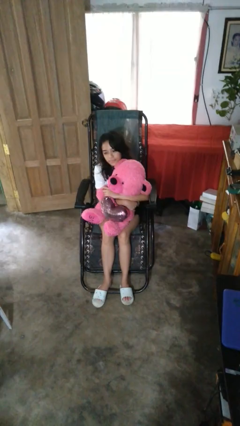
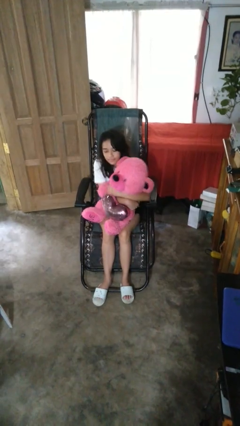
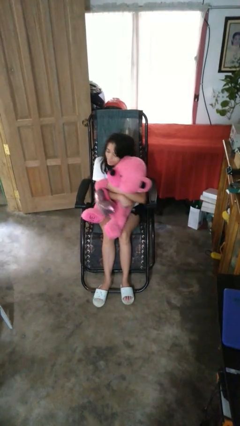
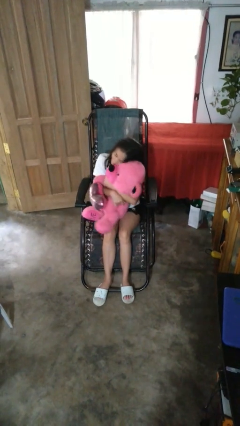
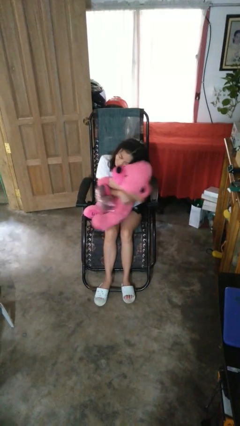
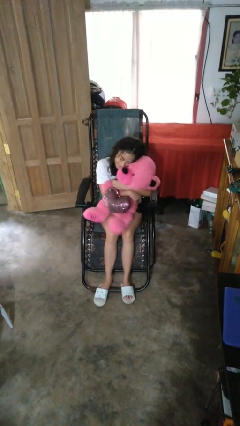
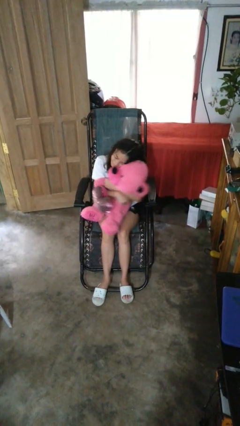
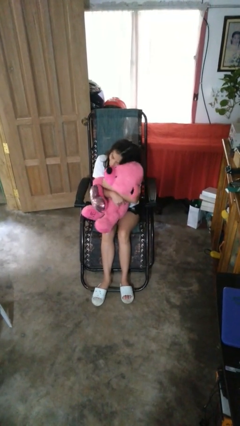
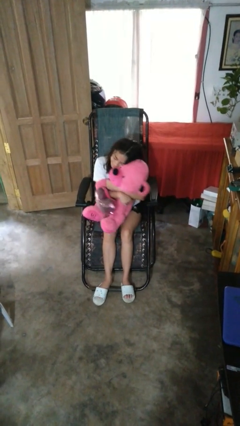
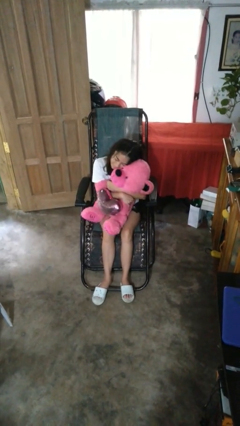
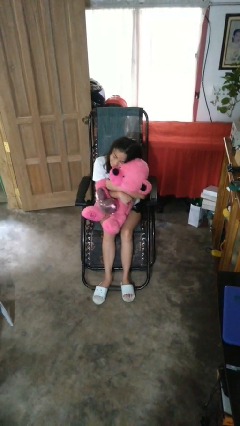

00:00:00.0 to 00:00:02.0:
person hugs stuffed animal

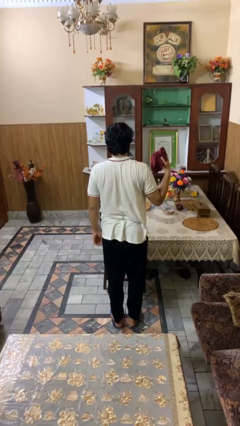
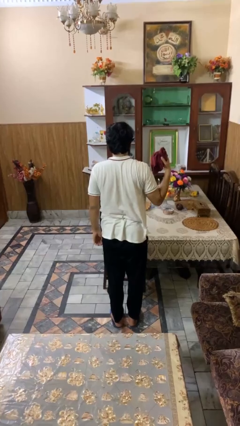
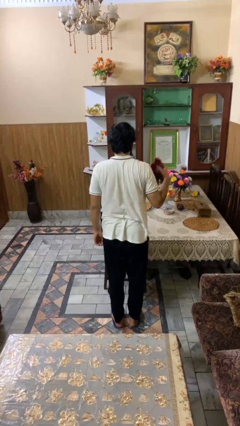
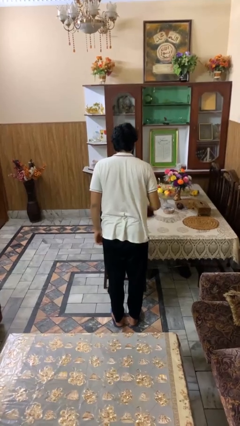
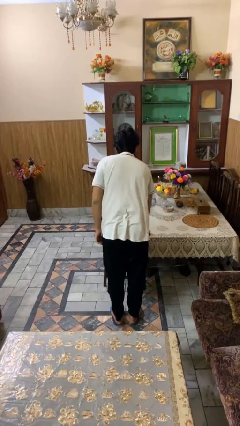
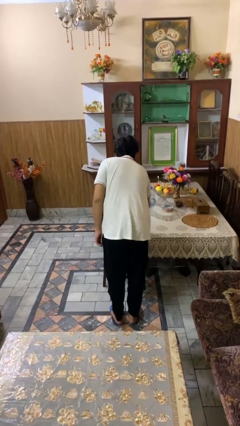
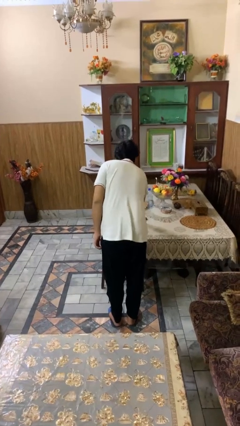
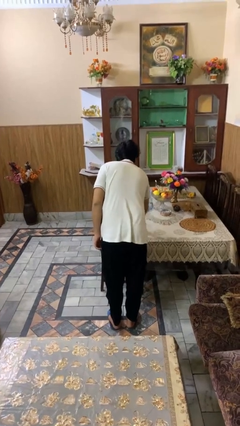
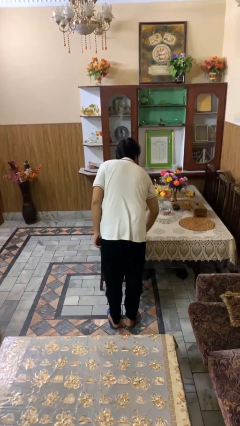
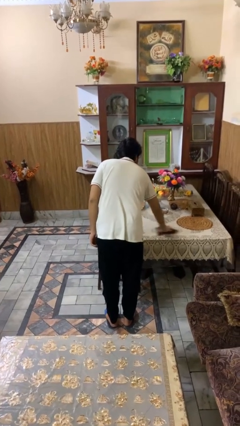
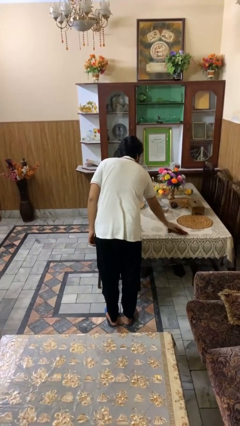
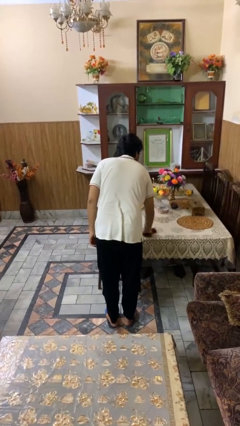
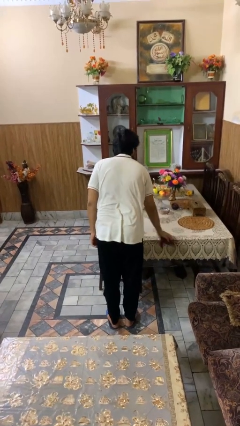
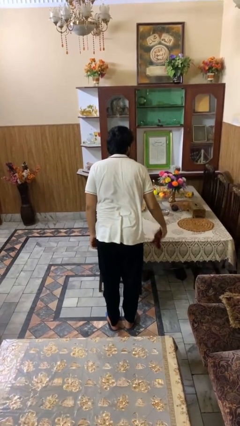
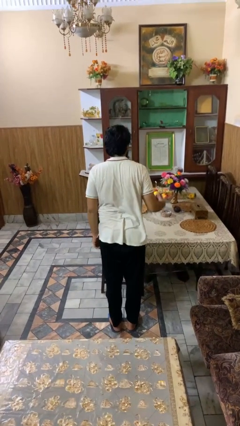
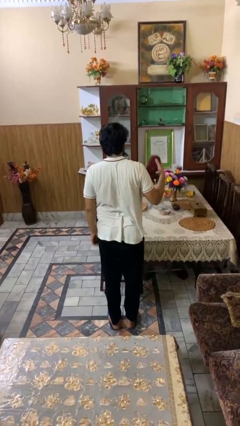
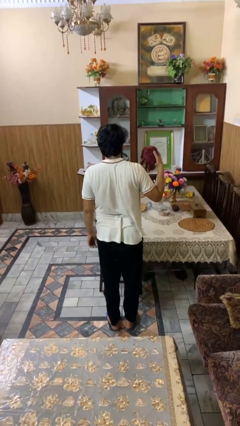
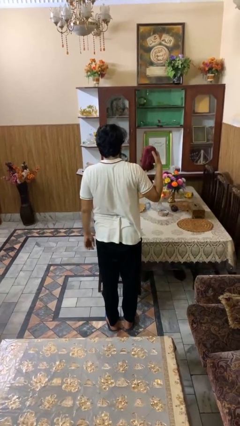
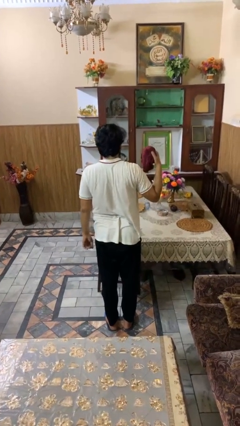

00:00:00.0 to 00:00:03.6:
person cleans table with rag

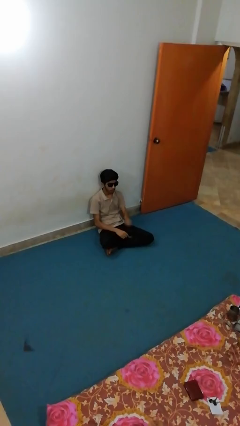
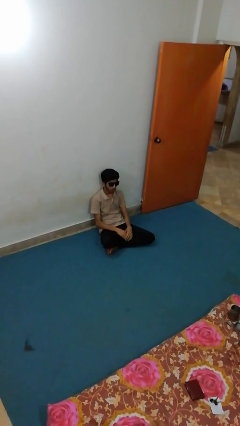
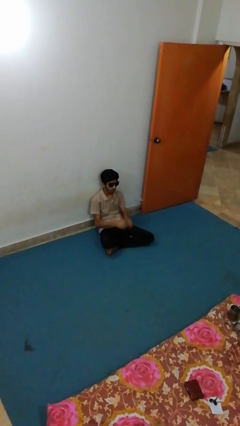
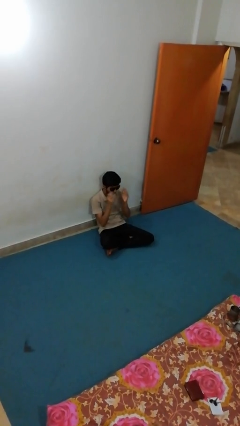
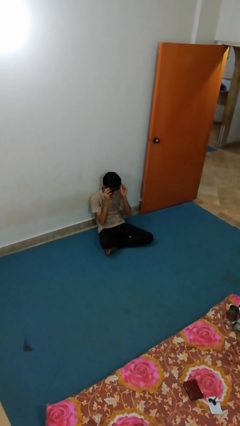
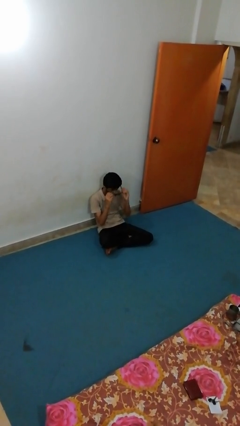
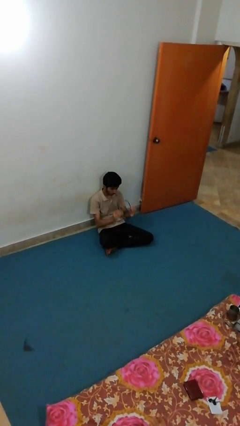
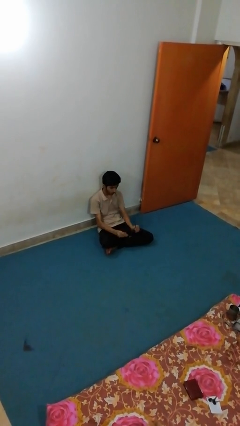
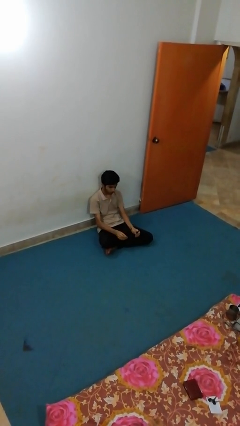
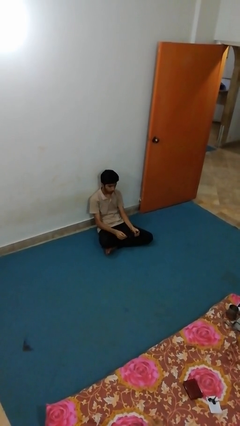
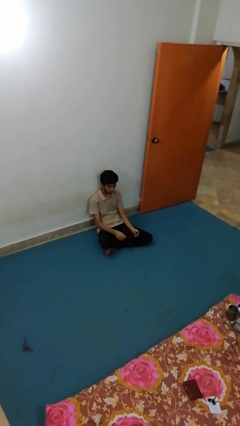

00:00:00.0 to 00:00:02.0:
person takes off sunglasses

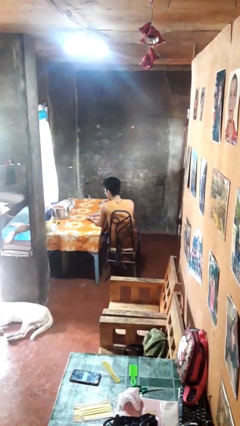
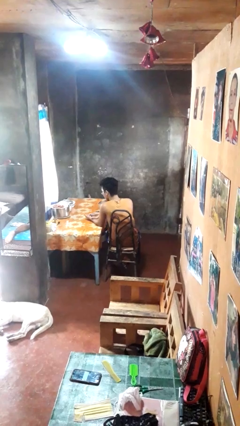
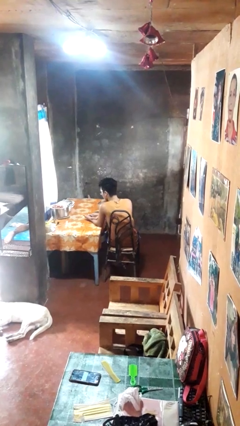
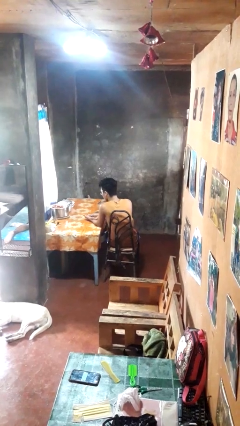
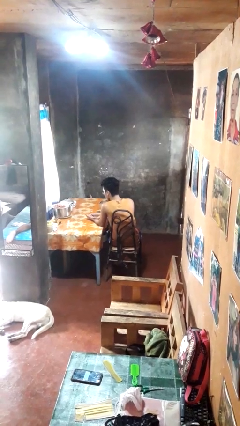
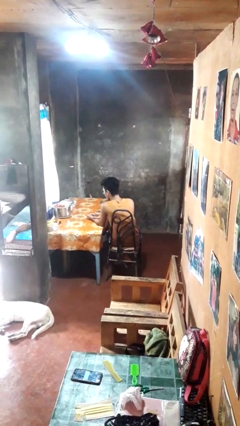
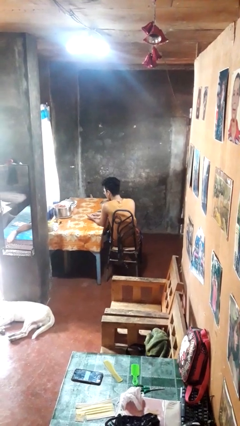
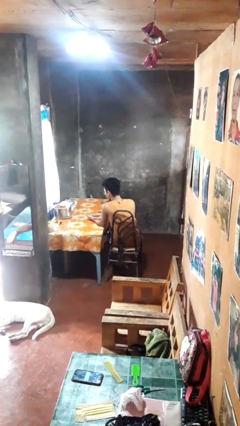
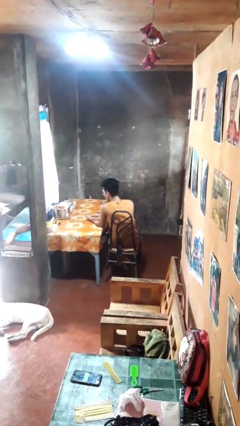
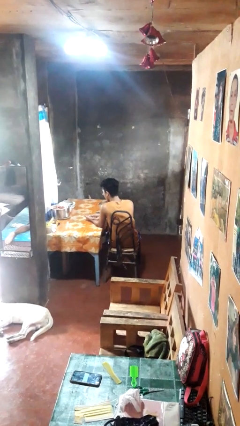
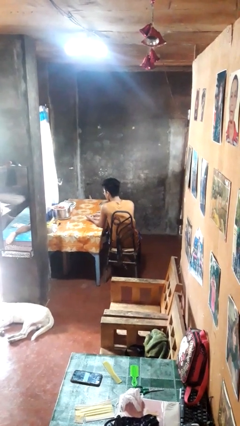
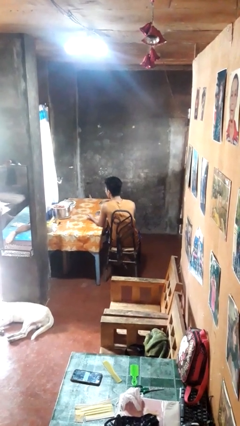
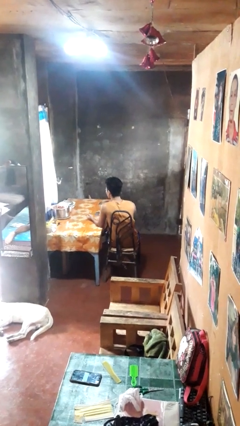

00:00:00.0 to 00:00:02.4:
person clips fingernails

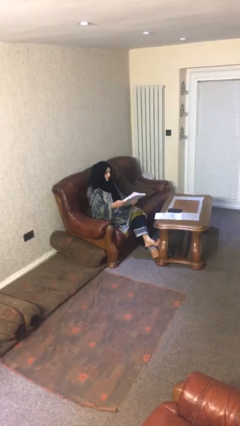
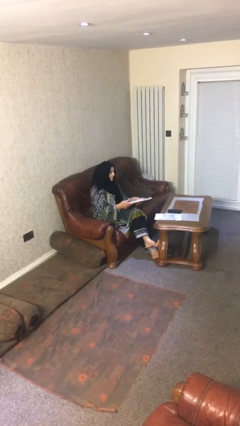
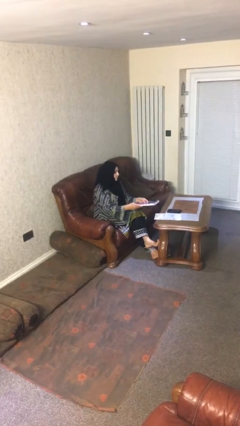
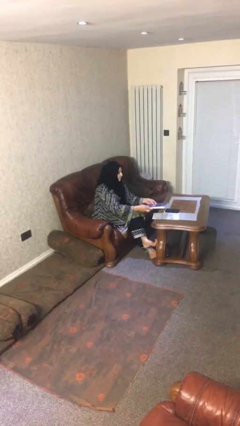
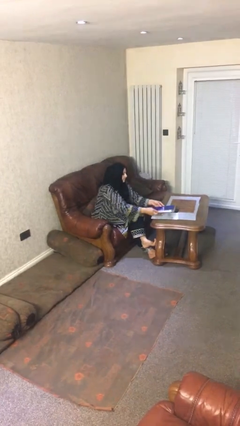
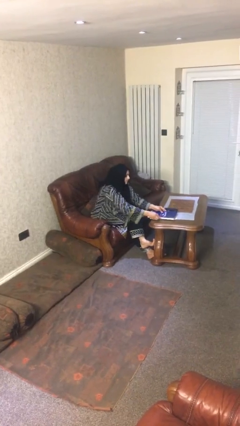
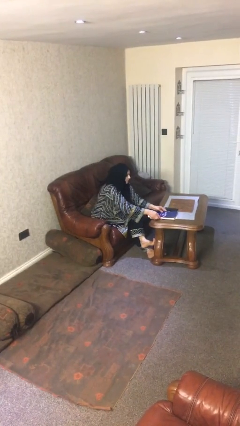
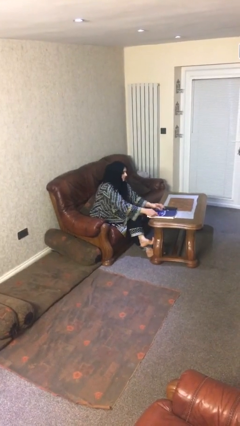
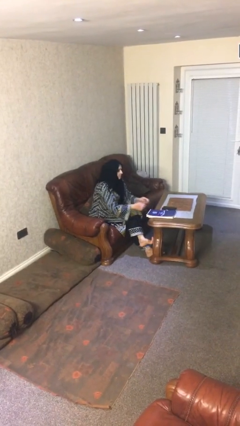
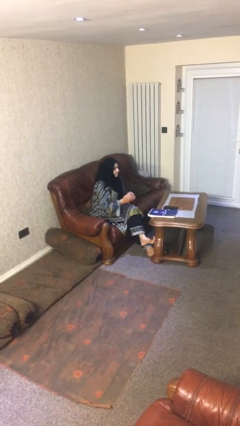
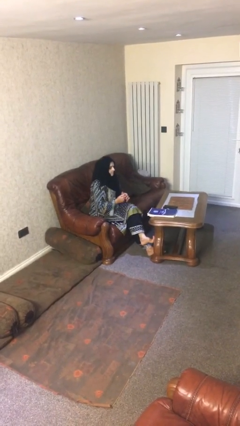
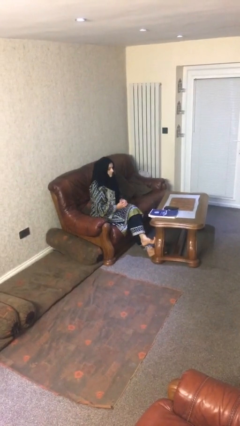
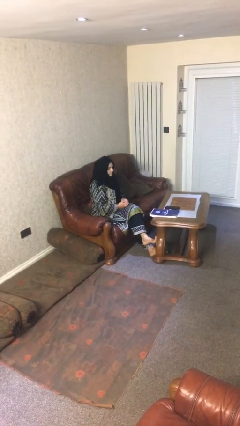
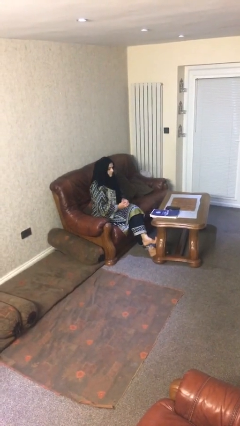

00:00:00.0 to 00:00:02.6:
person puts down object on table

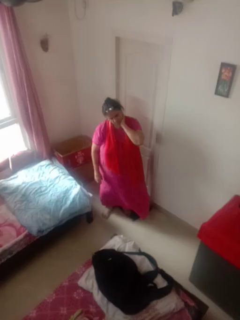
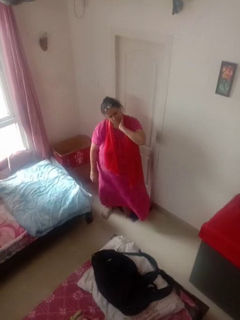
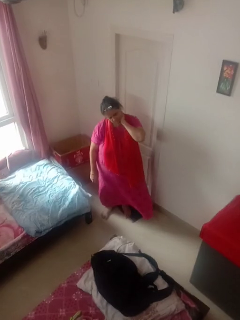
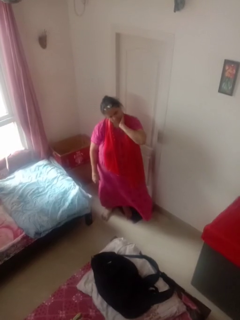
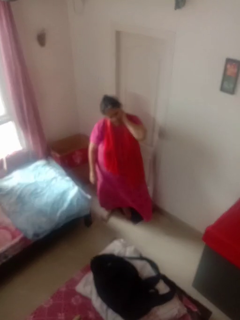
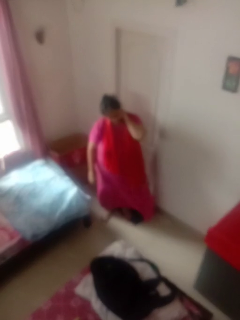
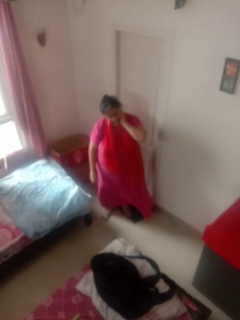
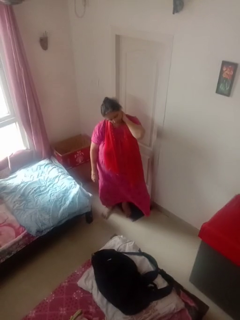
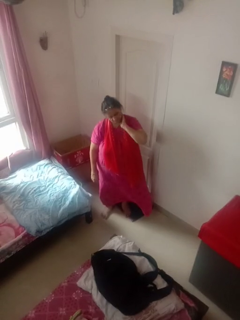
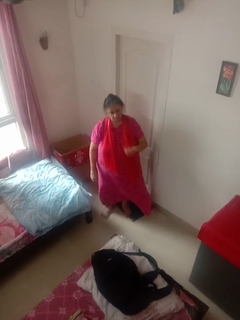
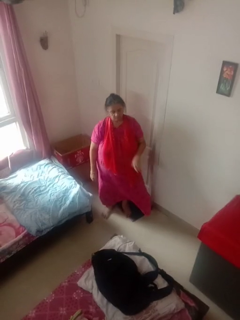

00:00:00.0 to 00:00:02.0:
person rubs neck

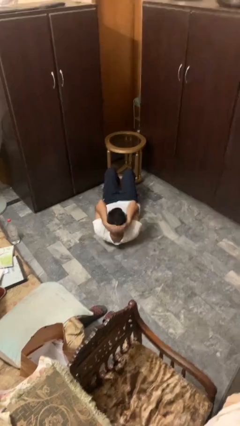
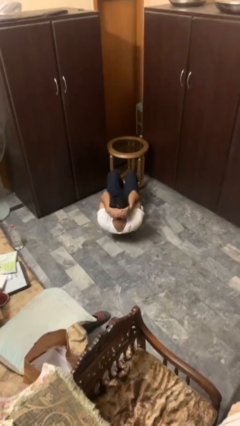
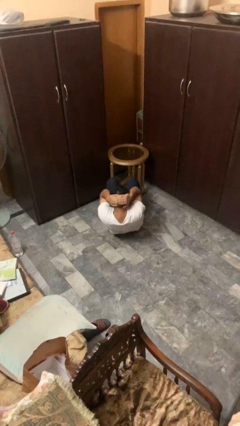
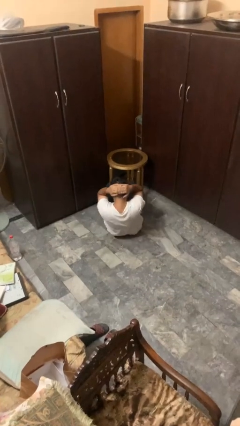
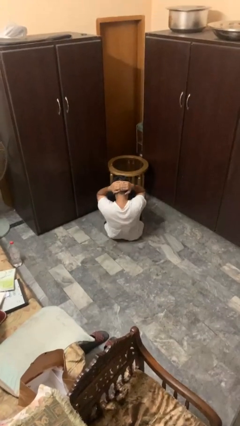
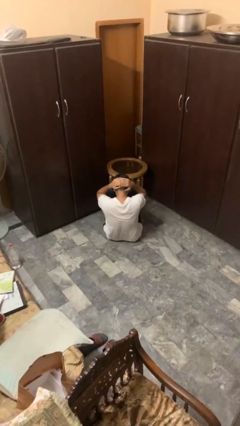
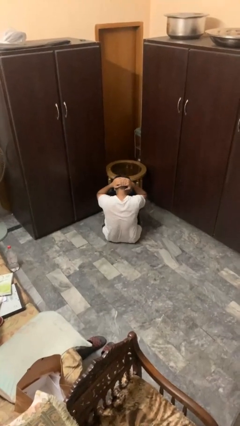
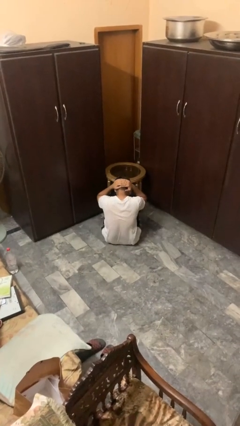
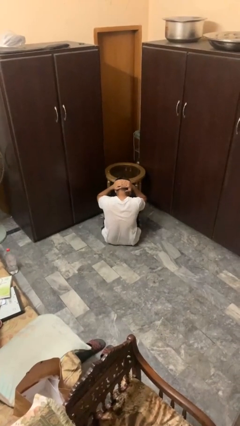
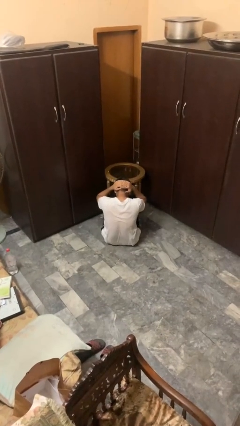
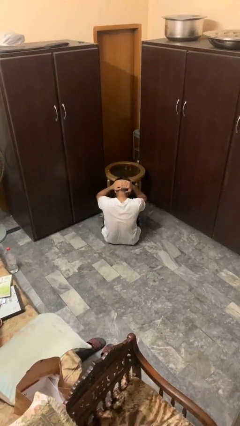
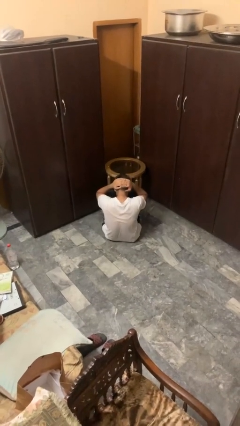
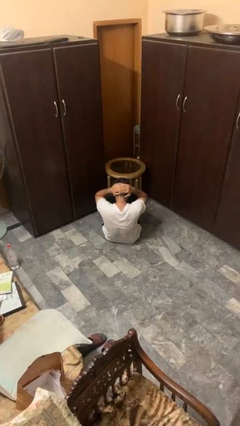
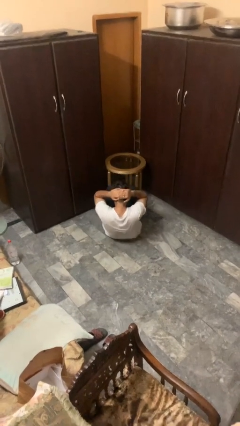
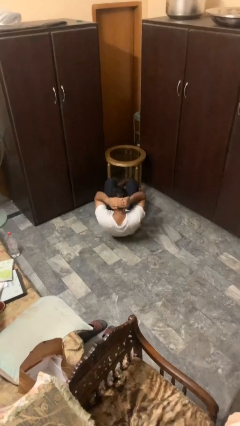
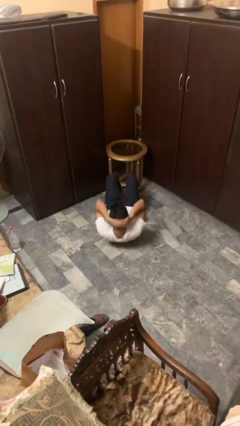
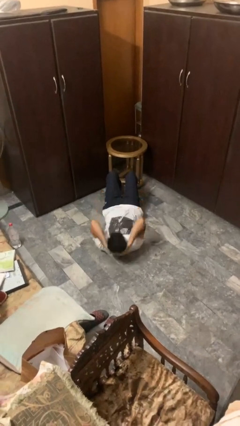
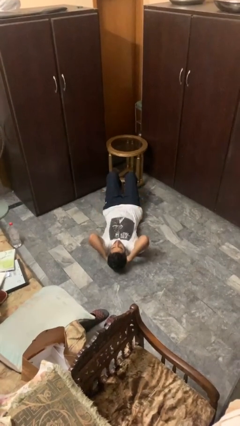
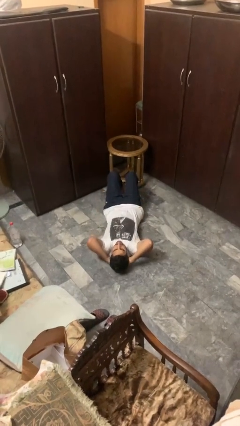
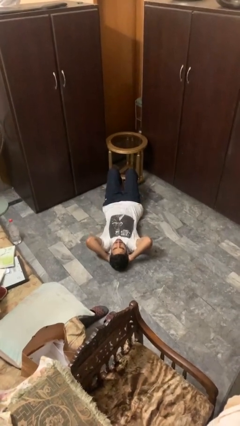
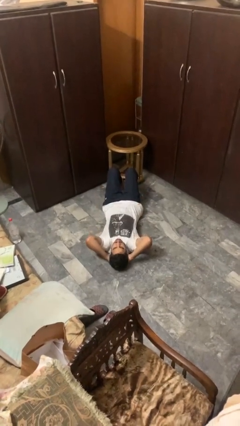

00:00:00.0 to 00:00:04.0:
person exercises with situp
